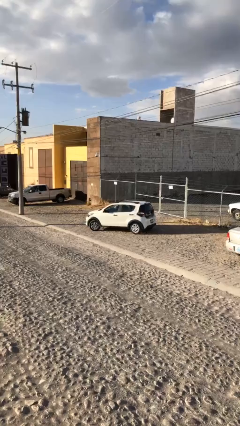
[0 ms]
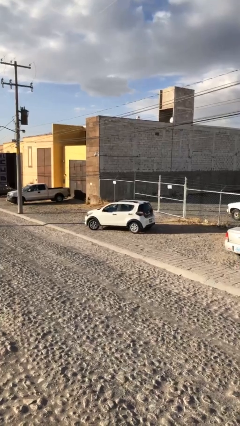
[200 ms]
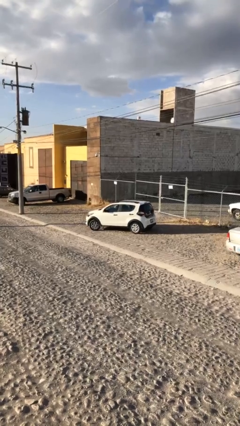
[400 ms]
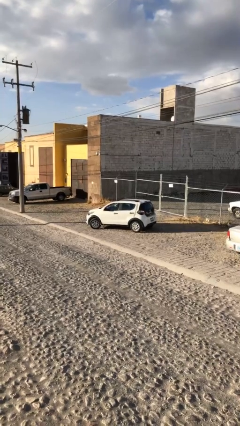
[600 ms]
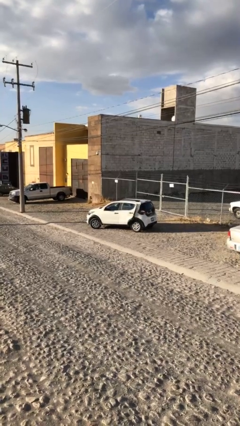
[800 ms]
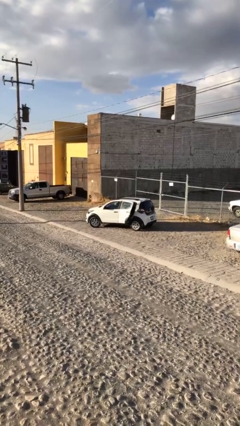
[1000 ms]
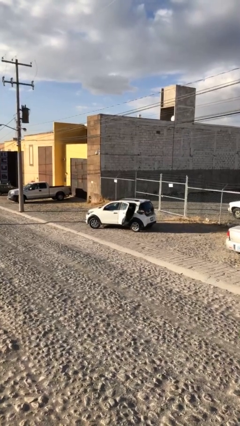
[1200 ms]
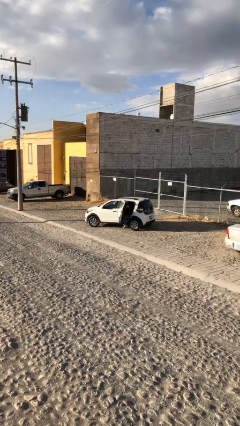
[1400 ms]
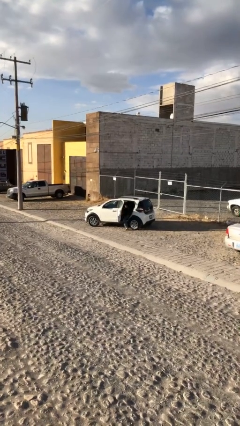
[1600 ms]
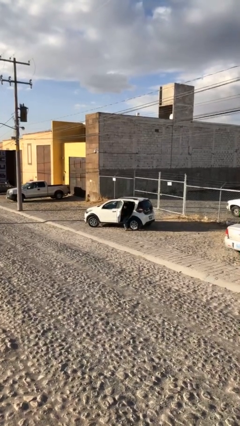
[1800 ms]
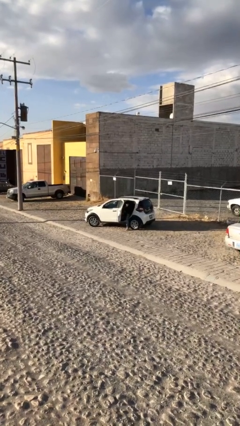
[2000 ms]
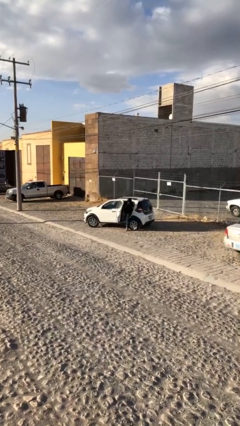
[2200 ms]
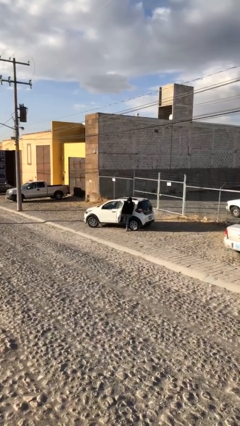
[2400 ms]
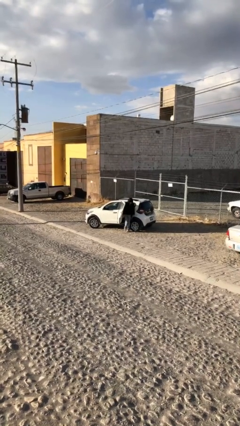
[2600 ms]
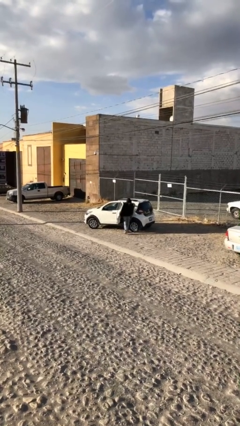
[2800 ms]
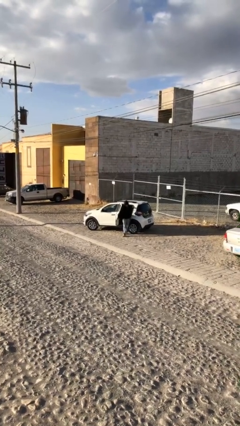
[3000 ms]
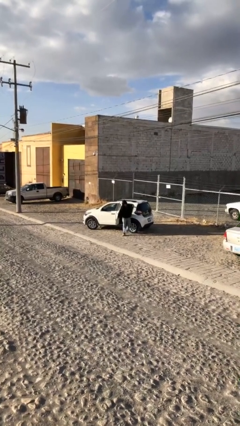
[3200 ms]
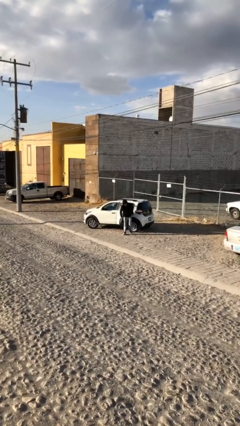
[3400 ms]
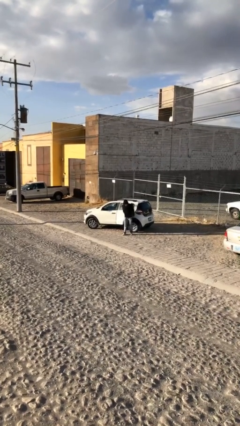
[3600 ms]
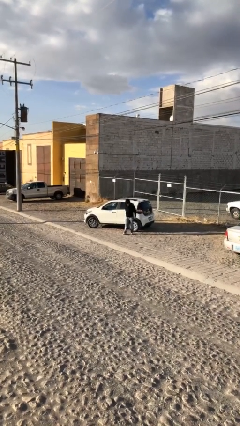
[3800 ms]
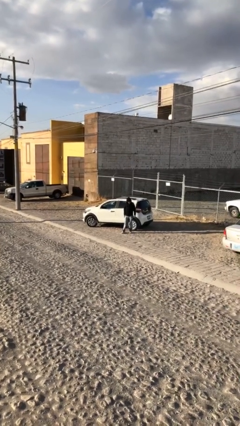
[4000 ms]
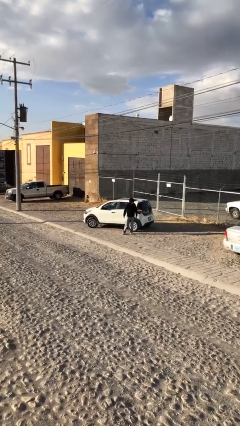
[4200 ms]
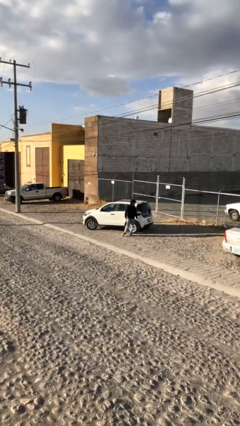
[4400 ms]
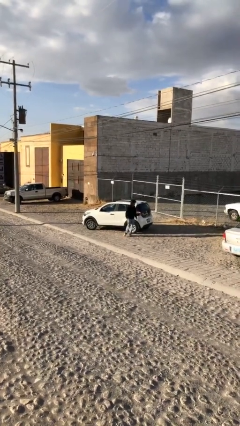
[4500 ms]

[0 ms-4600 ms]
car drops off person

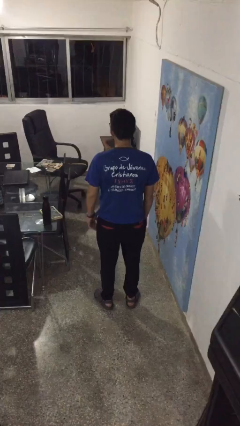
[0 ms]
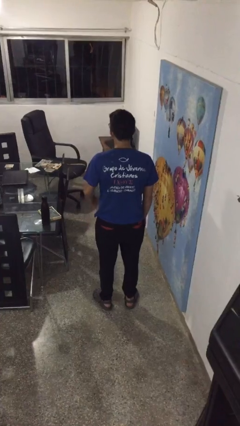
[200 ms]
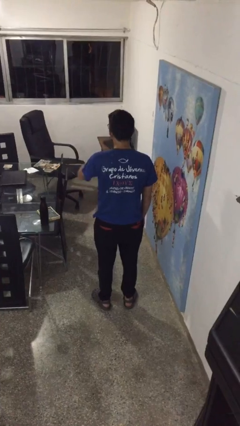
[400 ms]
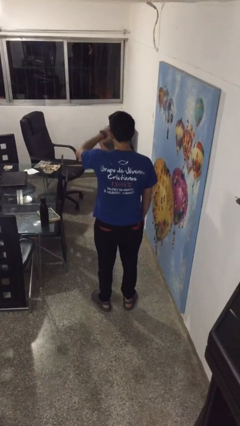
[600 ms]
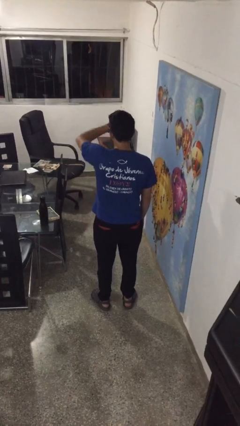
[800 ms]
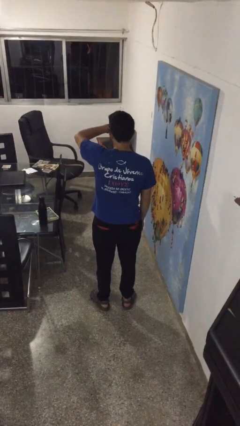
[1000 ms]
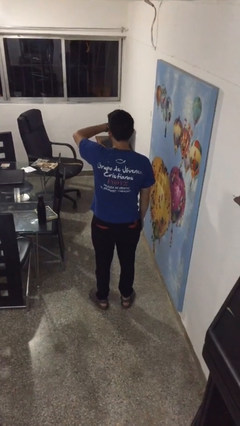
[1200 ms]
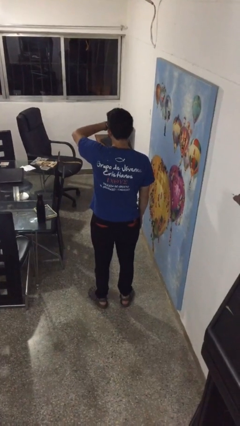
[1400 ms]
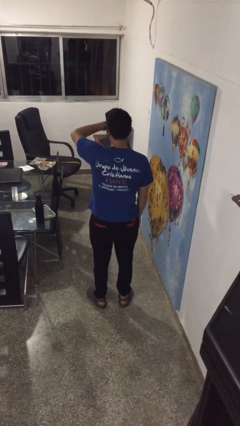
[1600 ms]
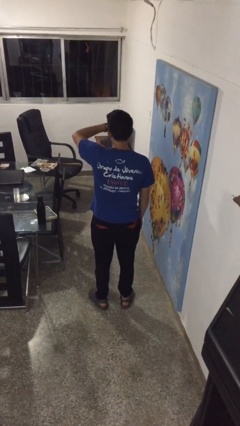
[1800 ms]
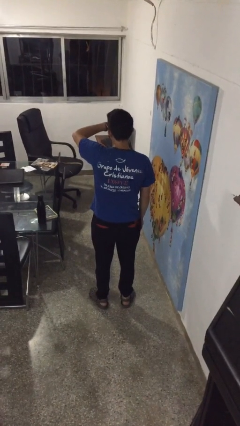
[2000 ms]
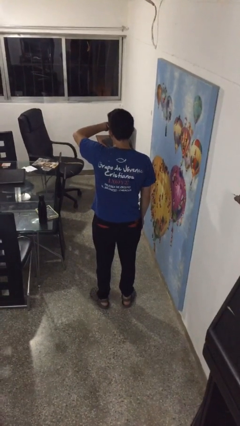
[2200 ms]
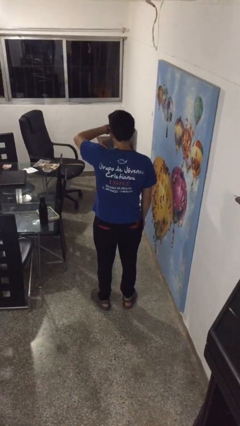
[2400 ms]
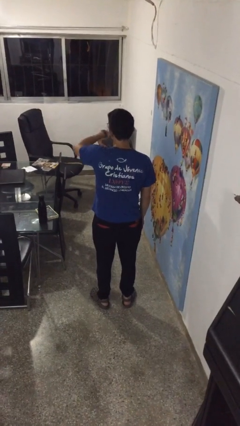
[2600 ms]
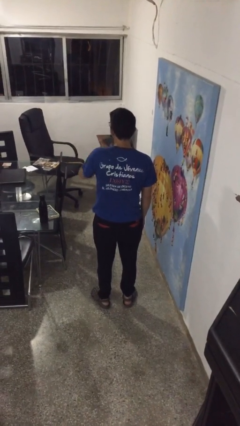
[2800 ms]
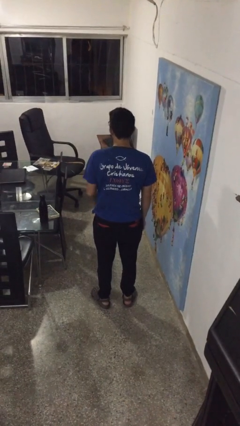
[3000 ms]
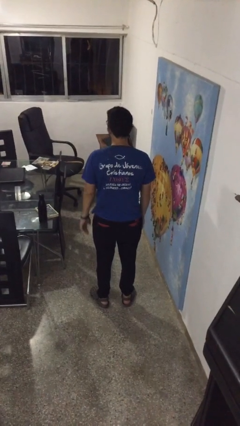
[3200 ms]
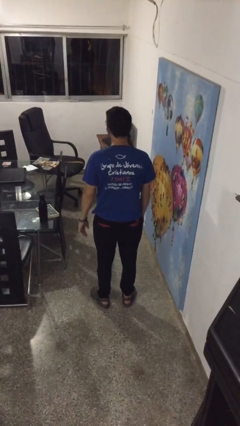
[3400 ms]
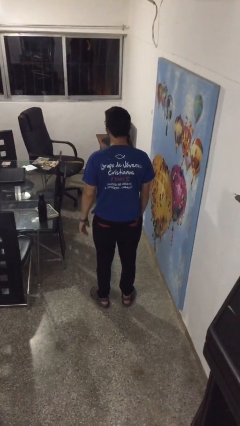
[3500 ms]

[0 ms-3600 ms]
person looks at wristwatch

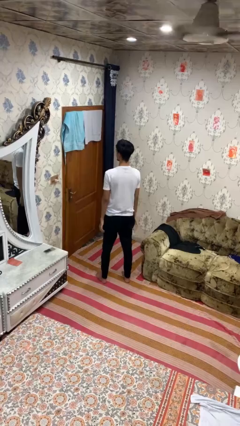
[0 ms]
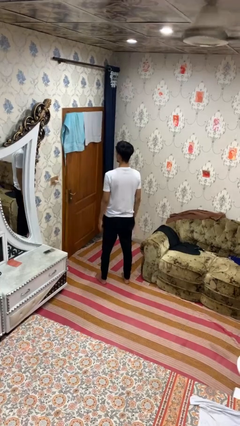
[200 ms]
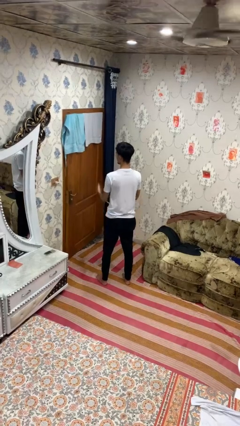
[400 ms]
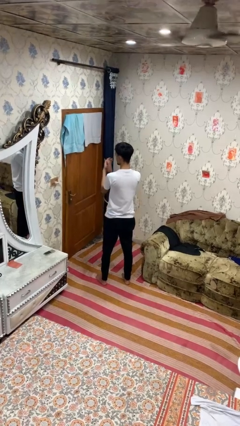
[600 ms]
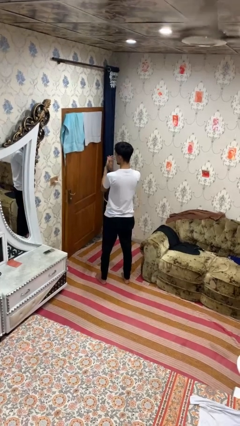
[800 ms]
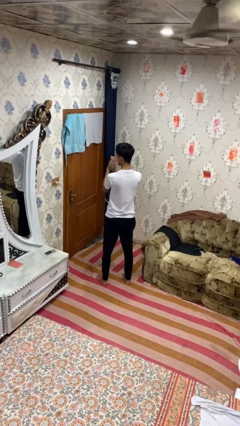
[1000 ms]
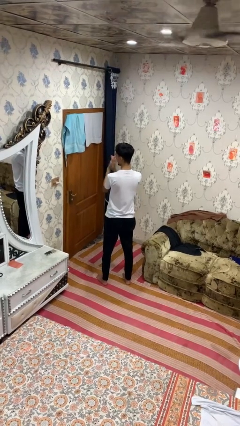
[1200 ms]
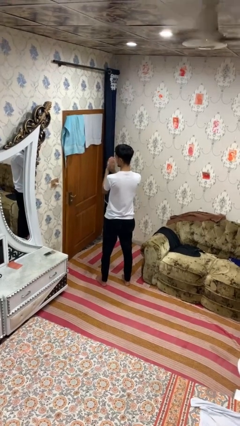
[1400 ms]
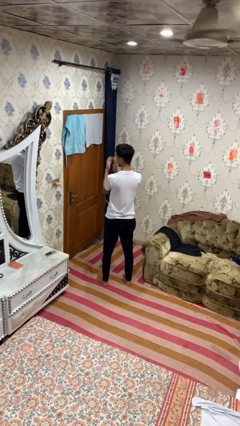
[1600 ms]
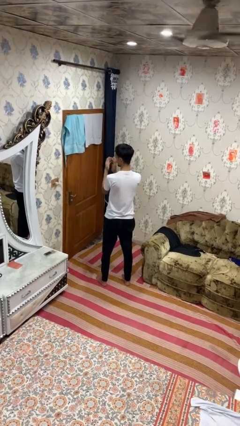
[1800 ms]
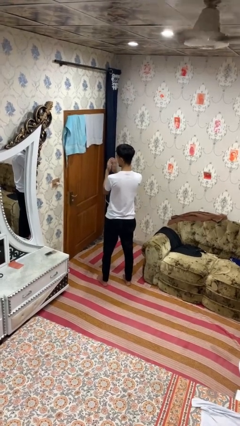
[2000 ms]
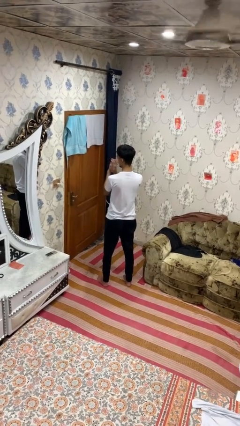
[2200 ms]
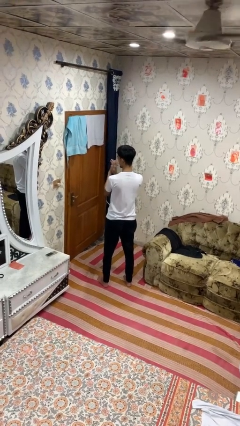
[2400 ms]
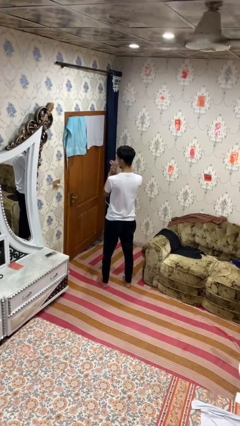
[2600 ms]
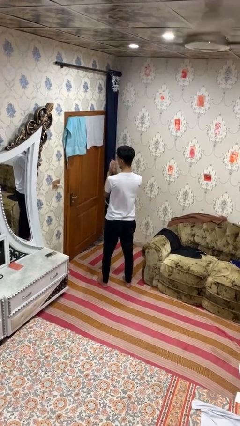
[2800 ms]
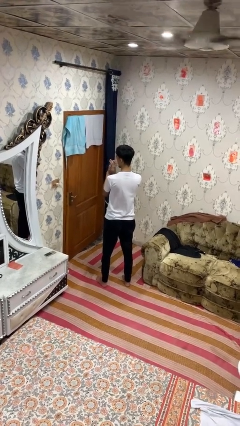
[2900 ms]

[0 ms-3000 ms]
person claps hands

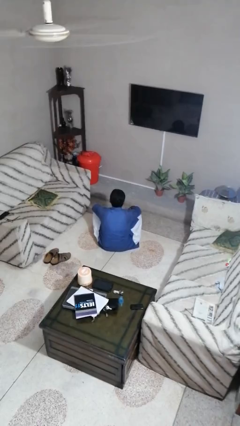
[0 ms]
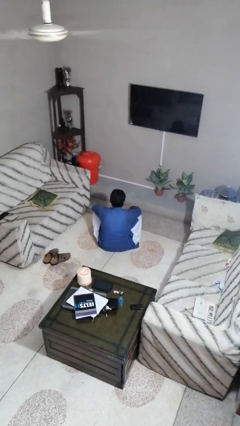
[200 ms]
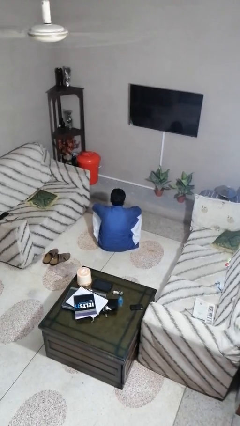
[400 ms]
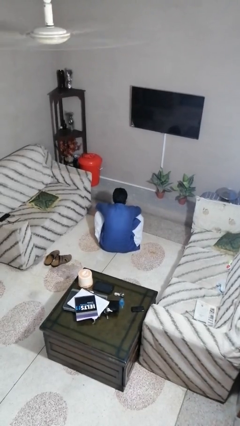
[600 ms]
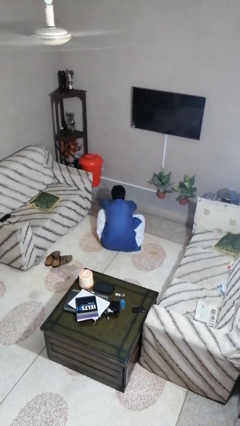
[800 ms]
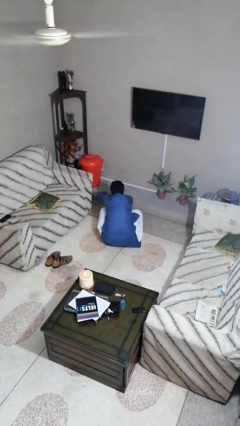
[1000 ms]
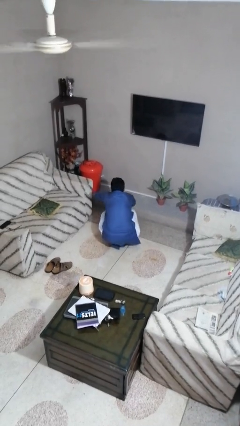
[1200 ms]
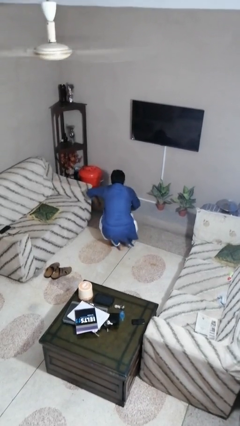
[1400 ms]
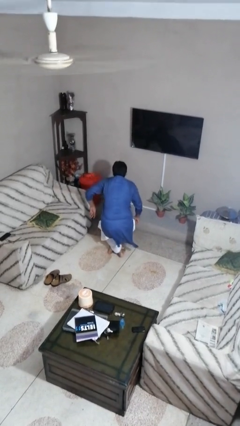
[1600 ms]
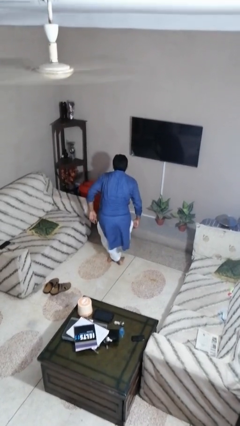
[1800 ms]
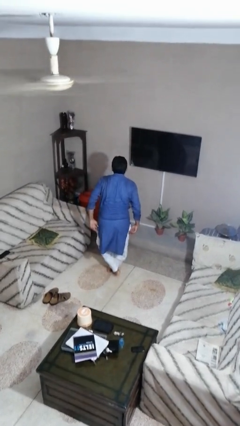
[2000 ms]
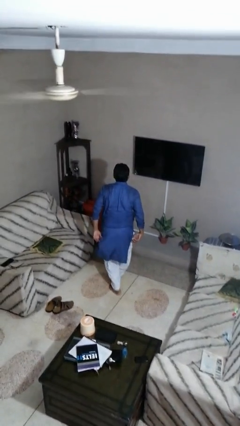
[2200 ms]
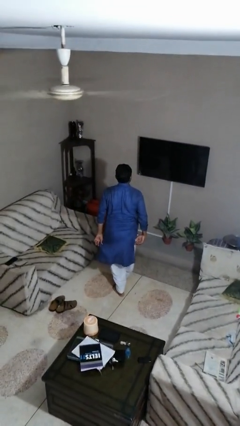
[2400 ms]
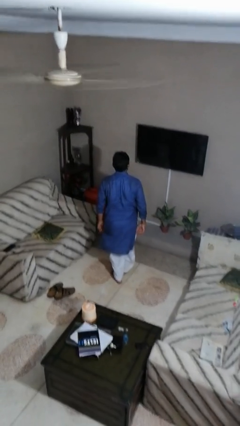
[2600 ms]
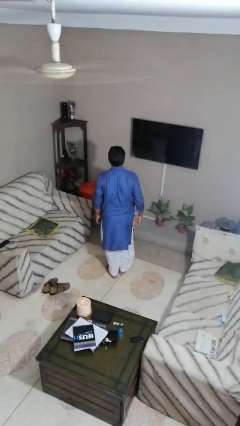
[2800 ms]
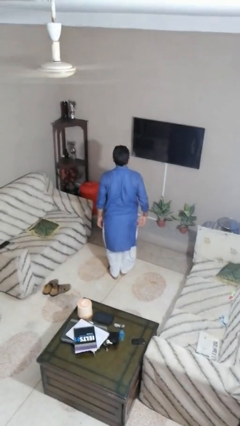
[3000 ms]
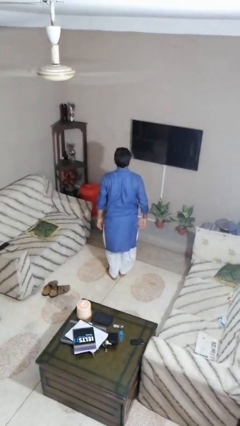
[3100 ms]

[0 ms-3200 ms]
person stands up from floor

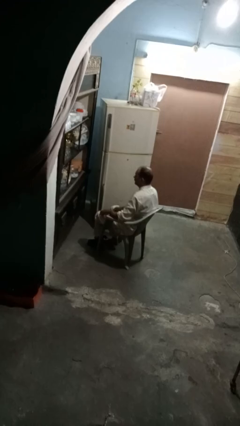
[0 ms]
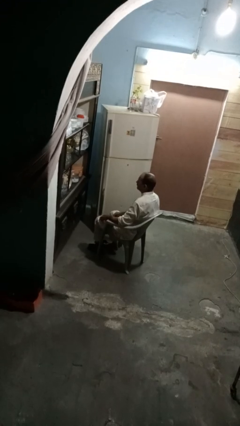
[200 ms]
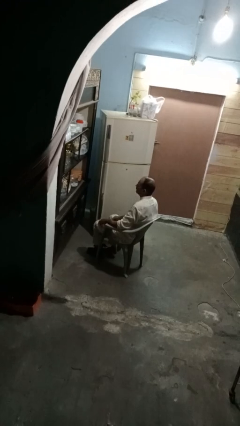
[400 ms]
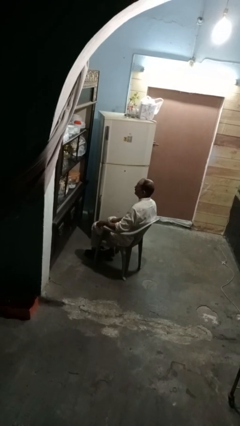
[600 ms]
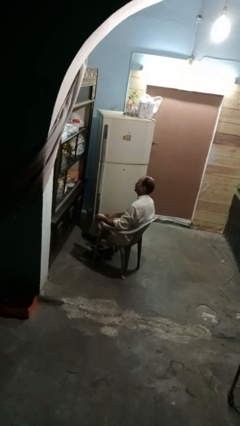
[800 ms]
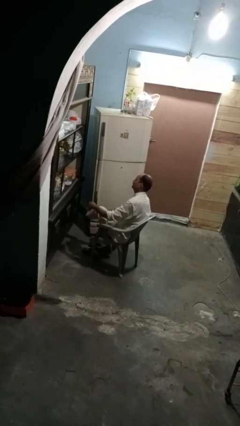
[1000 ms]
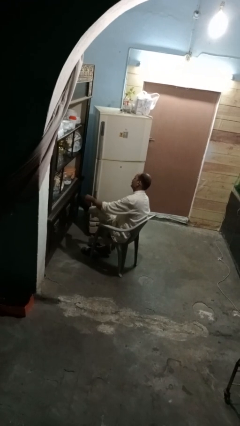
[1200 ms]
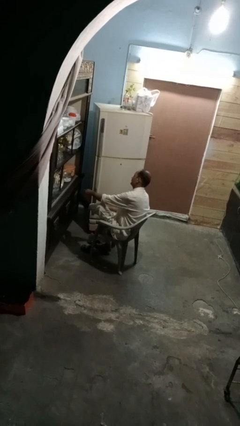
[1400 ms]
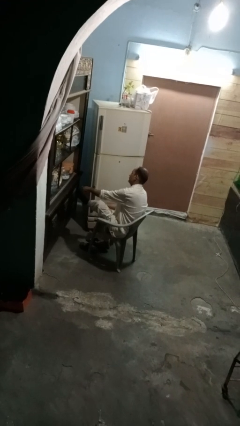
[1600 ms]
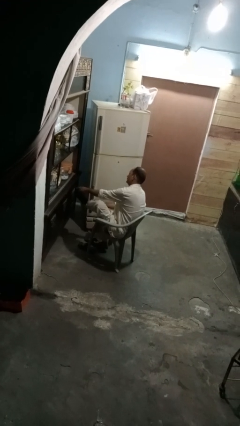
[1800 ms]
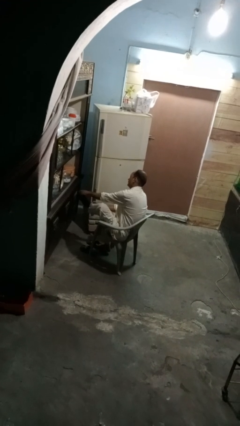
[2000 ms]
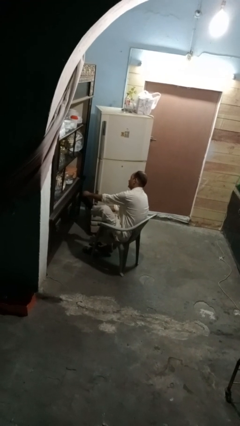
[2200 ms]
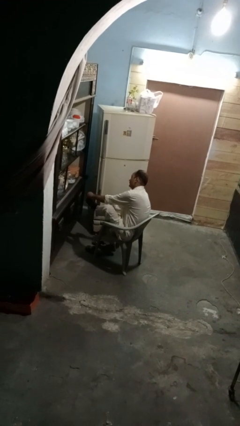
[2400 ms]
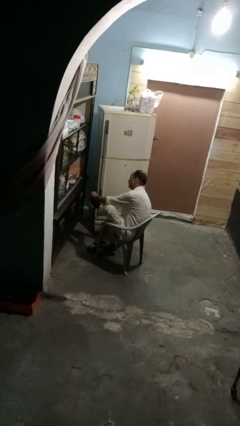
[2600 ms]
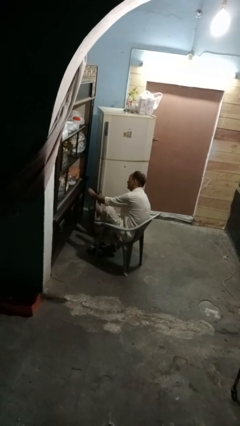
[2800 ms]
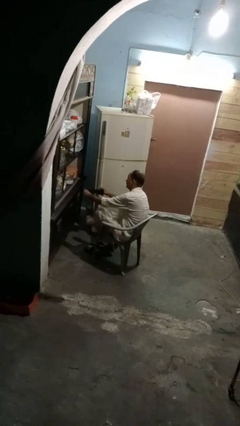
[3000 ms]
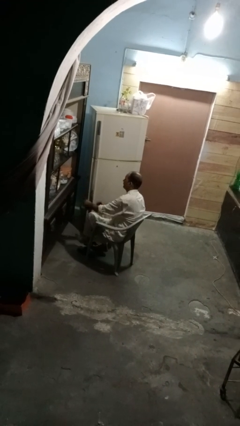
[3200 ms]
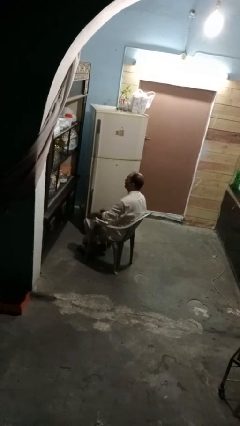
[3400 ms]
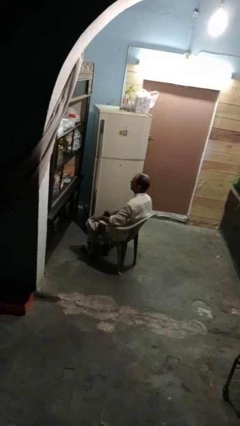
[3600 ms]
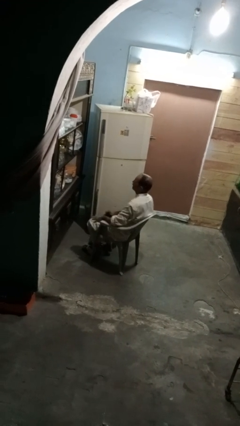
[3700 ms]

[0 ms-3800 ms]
person takes off socks
